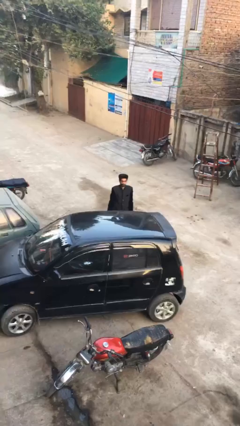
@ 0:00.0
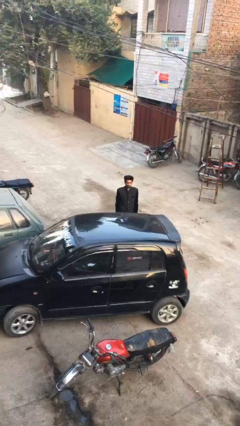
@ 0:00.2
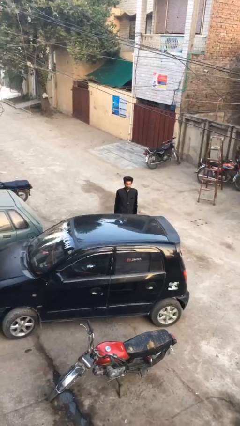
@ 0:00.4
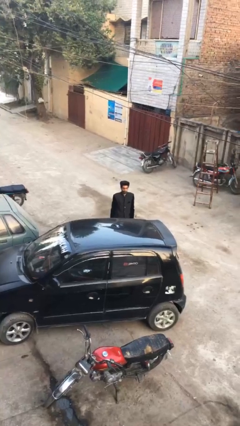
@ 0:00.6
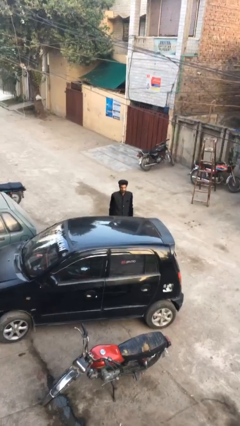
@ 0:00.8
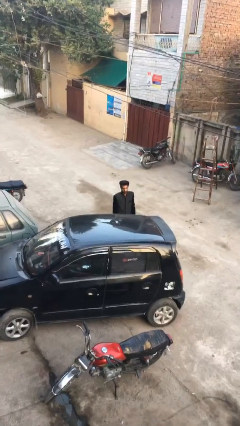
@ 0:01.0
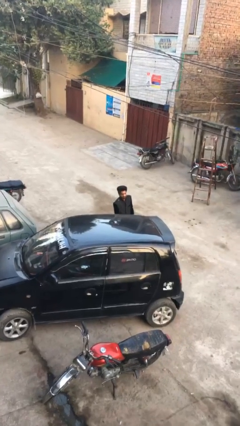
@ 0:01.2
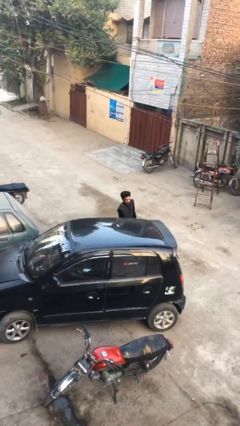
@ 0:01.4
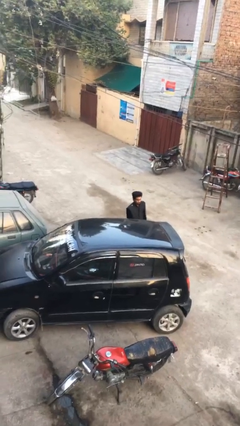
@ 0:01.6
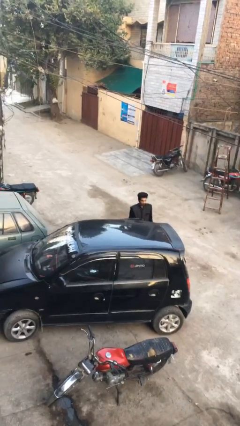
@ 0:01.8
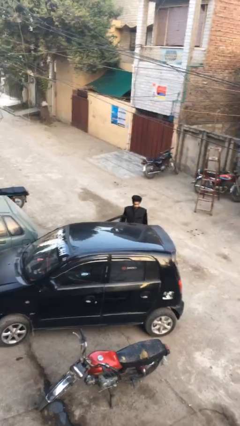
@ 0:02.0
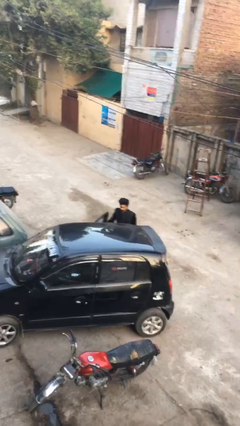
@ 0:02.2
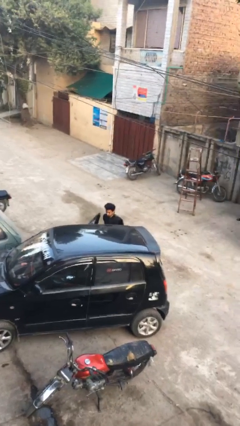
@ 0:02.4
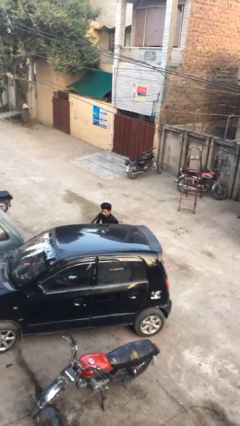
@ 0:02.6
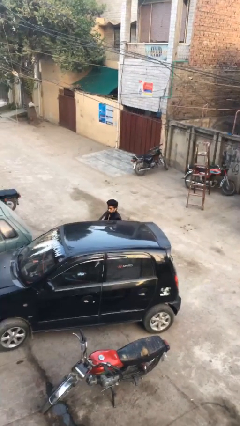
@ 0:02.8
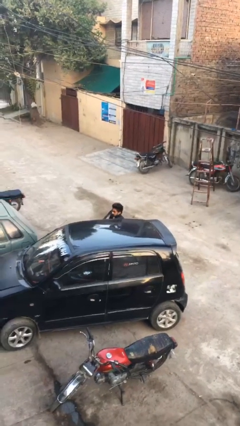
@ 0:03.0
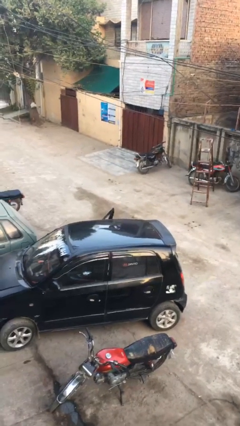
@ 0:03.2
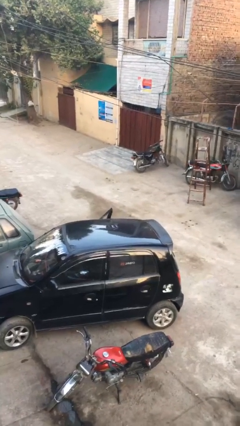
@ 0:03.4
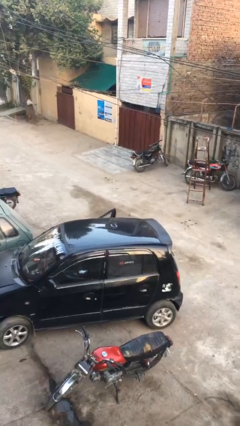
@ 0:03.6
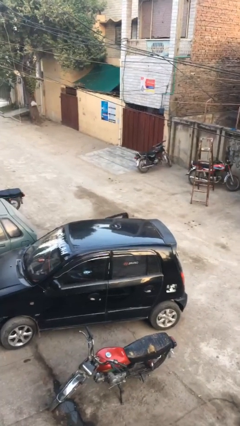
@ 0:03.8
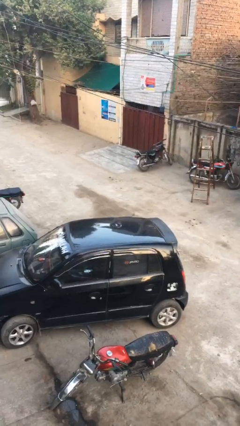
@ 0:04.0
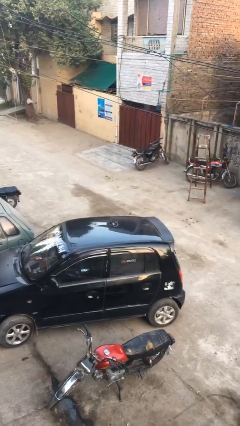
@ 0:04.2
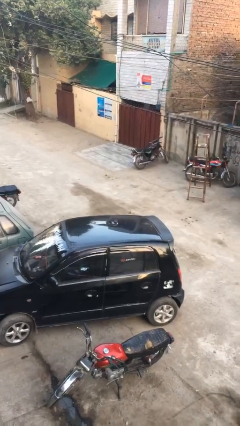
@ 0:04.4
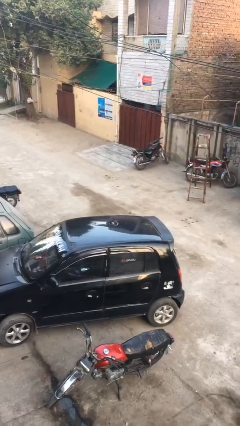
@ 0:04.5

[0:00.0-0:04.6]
person enters car

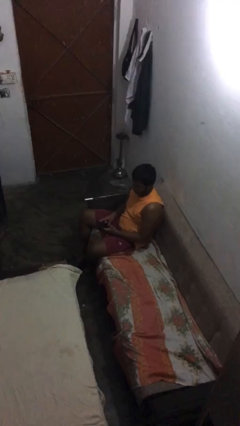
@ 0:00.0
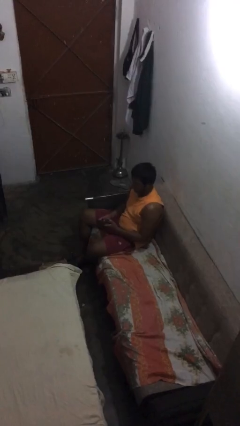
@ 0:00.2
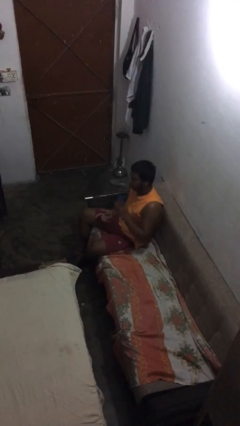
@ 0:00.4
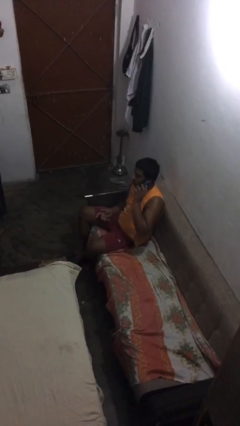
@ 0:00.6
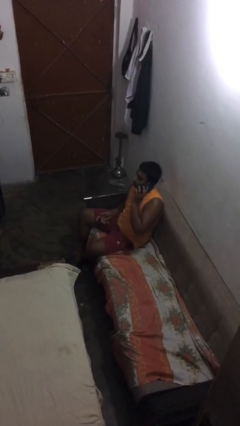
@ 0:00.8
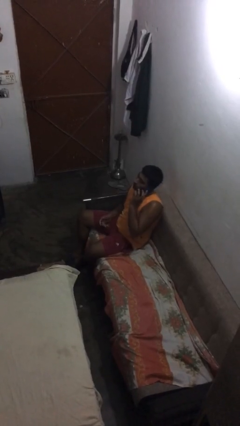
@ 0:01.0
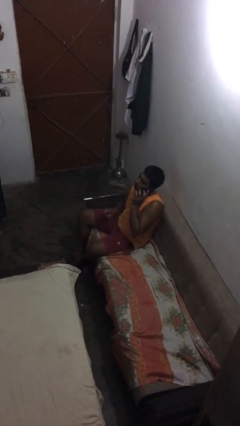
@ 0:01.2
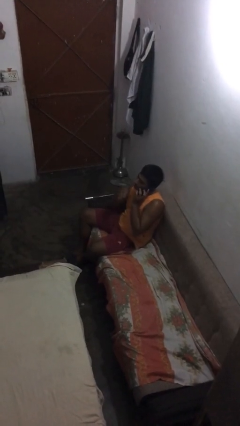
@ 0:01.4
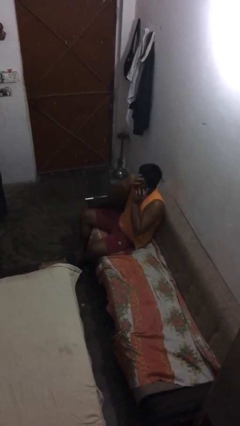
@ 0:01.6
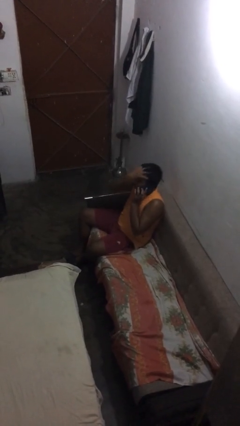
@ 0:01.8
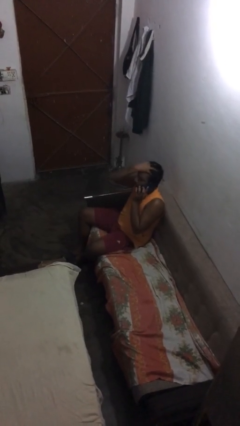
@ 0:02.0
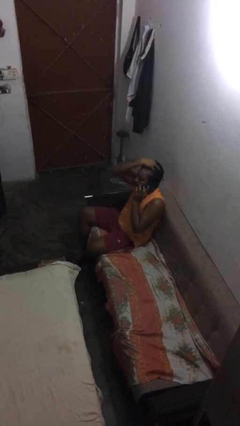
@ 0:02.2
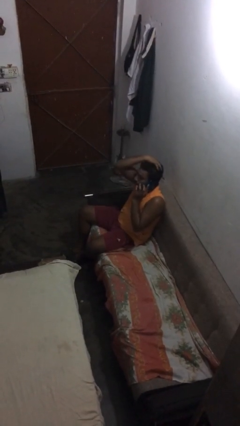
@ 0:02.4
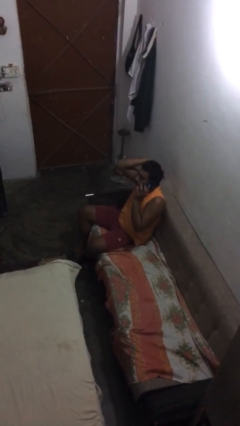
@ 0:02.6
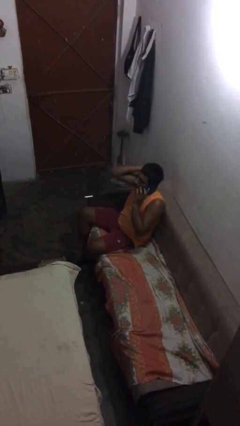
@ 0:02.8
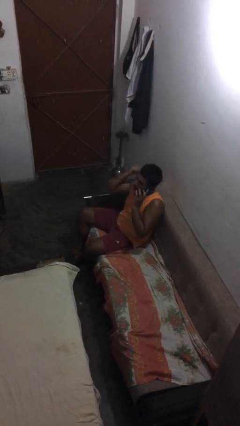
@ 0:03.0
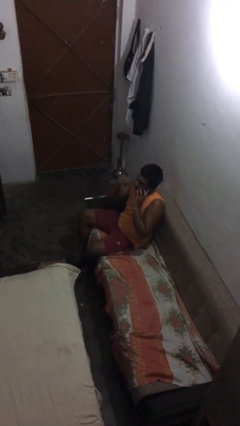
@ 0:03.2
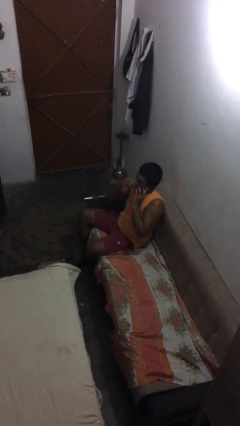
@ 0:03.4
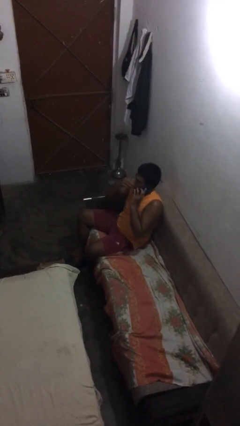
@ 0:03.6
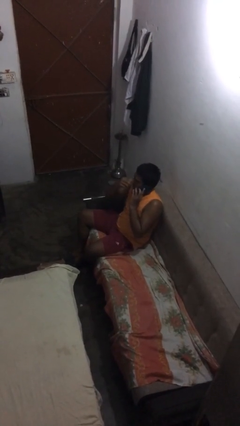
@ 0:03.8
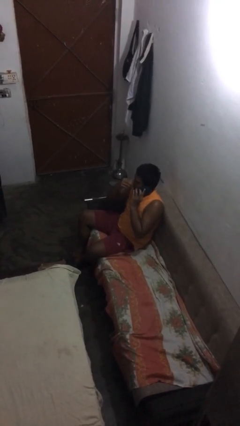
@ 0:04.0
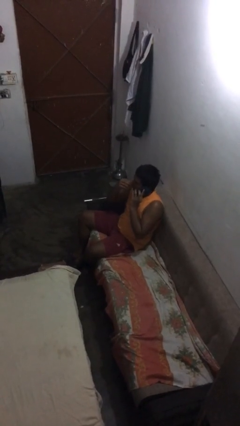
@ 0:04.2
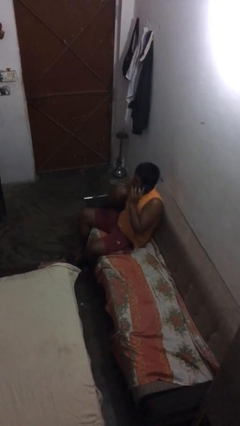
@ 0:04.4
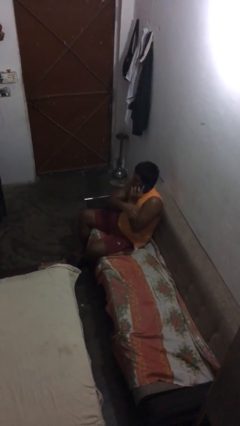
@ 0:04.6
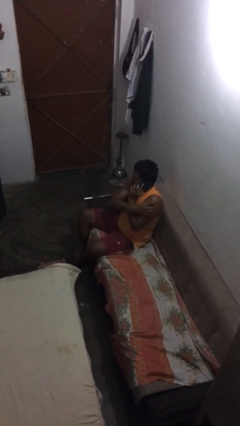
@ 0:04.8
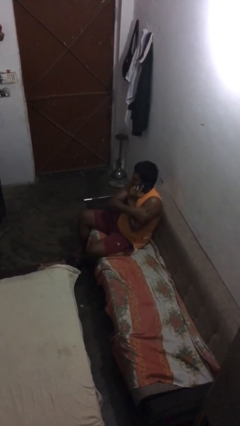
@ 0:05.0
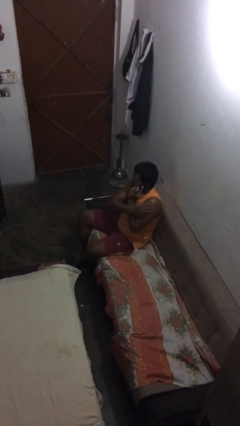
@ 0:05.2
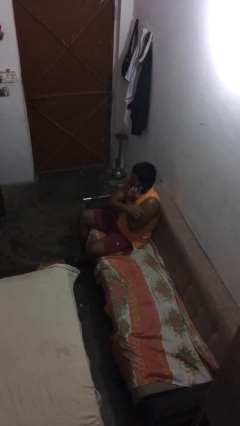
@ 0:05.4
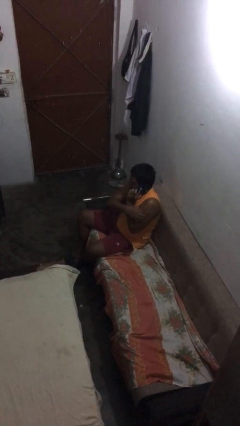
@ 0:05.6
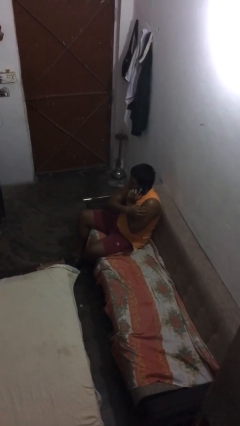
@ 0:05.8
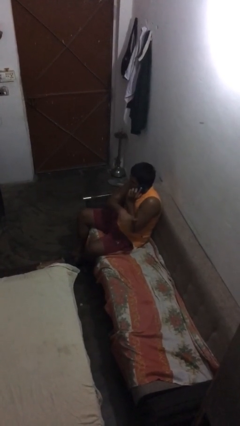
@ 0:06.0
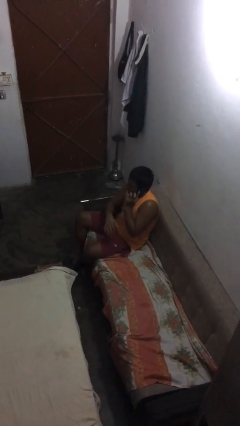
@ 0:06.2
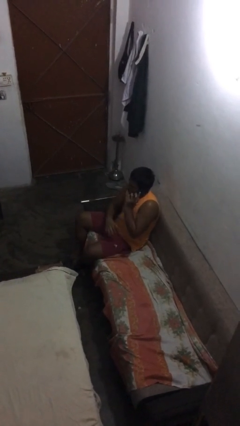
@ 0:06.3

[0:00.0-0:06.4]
person talks on phone

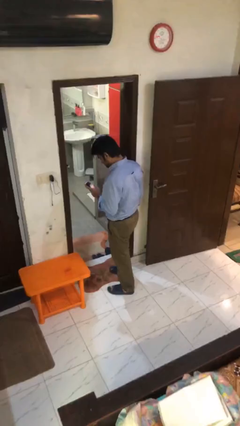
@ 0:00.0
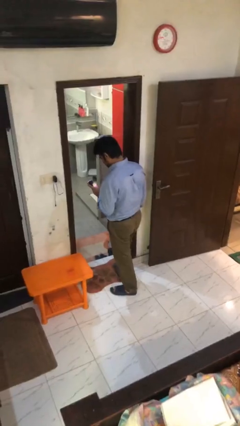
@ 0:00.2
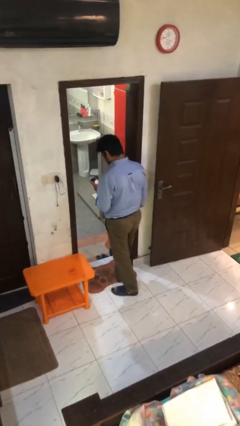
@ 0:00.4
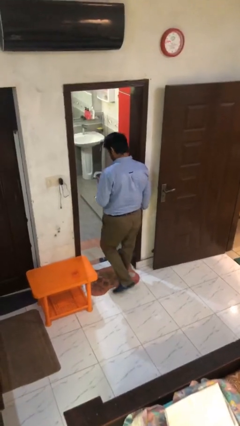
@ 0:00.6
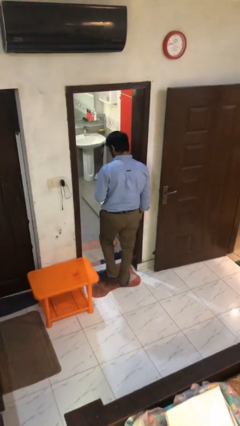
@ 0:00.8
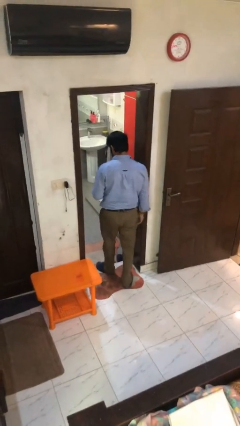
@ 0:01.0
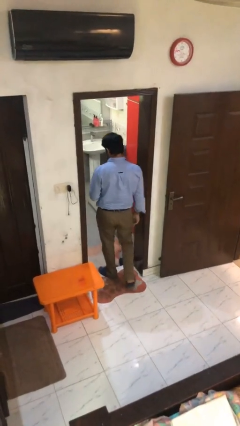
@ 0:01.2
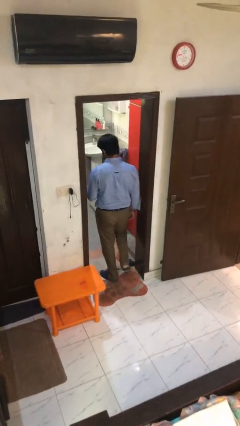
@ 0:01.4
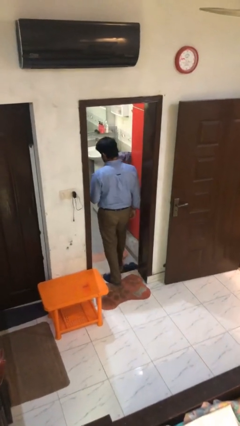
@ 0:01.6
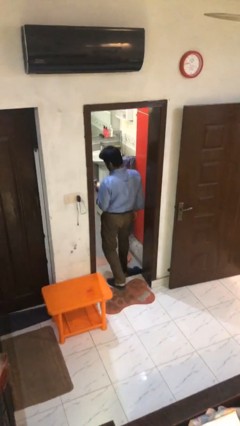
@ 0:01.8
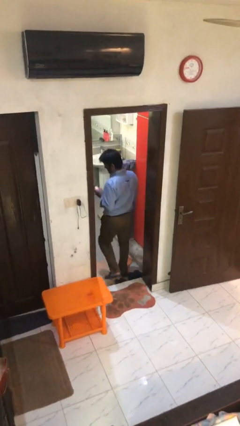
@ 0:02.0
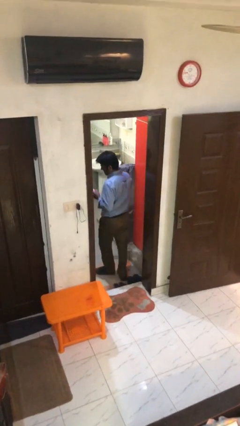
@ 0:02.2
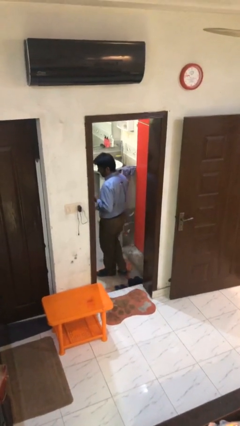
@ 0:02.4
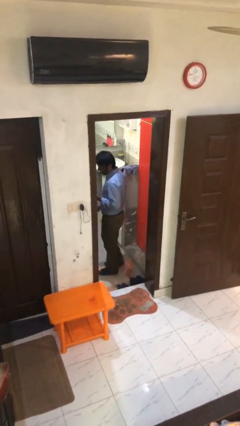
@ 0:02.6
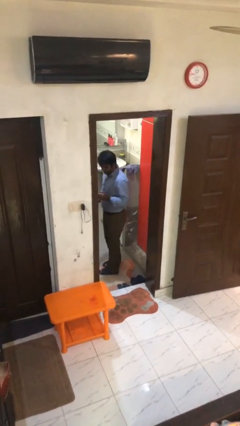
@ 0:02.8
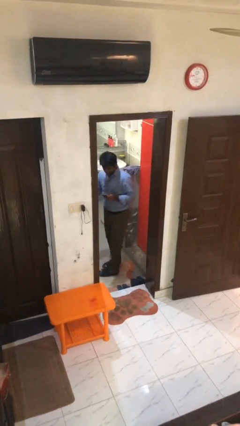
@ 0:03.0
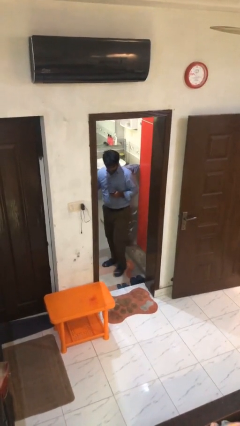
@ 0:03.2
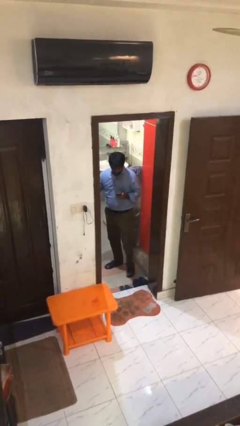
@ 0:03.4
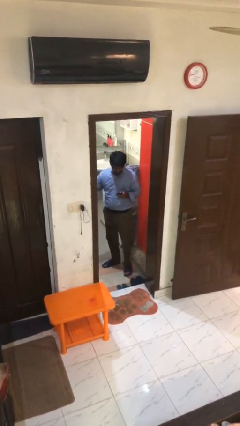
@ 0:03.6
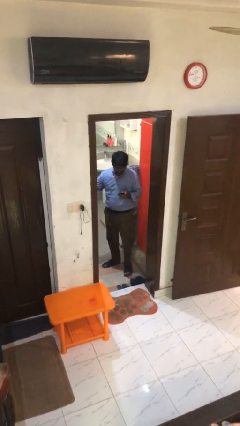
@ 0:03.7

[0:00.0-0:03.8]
person exits scene through structure

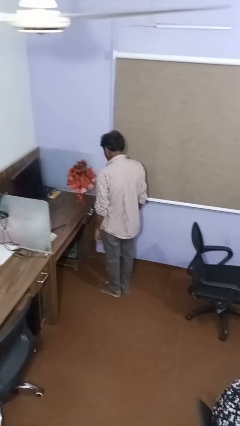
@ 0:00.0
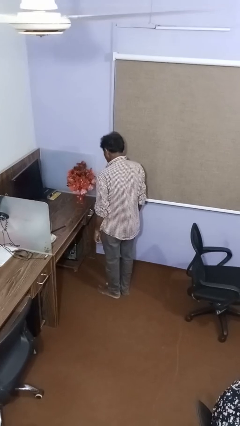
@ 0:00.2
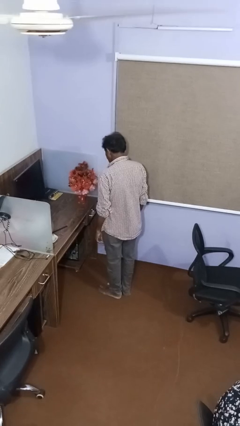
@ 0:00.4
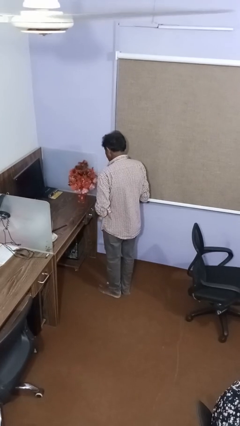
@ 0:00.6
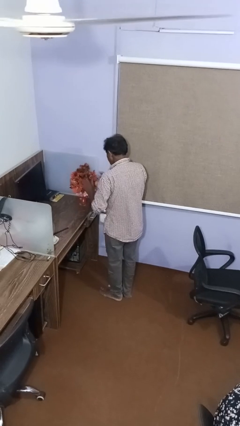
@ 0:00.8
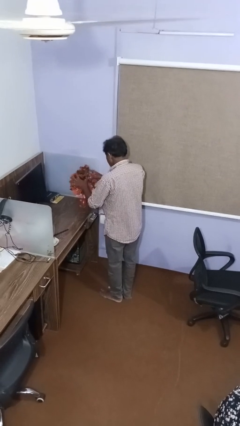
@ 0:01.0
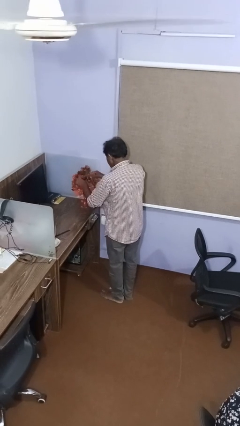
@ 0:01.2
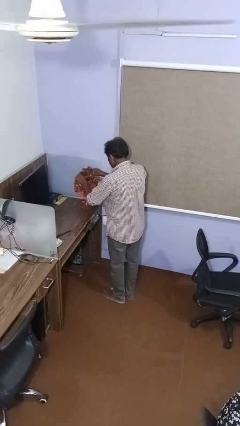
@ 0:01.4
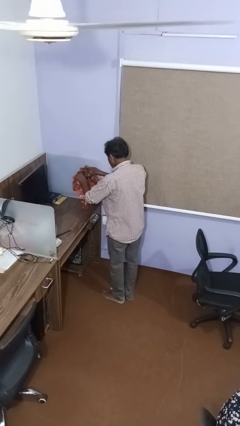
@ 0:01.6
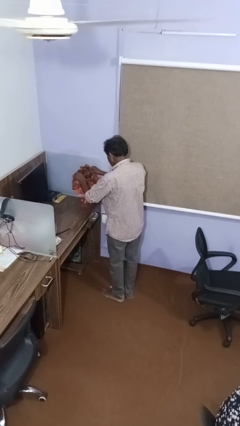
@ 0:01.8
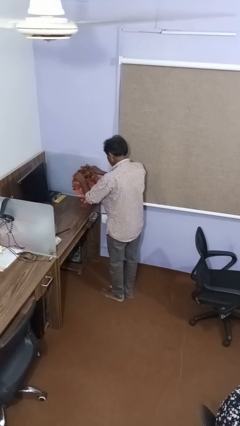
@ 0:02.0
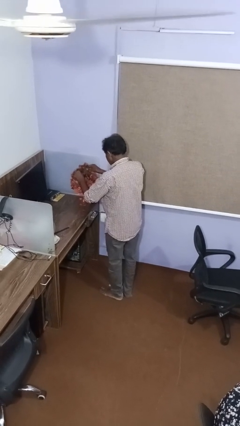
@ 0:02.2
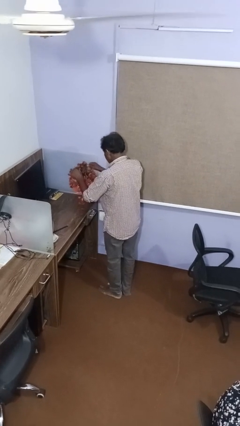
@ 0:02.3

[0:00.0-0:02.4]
person arranges flowers in vase
